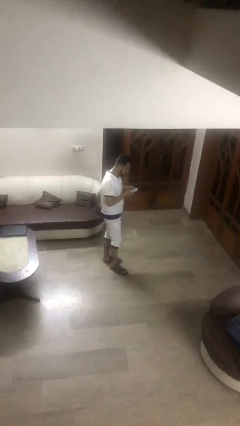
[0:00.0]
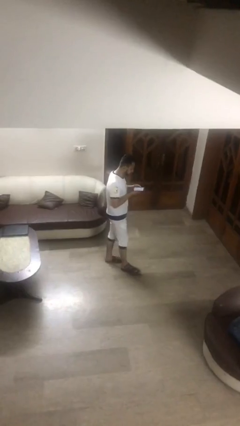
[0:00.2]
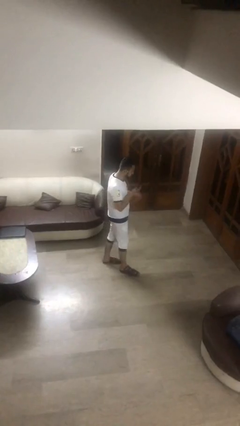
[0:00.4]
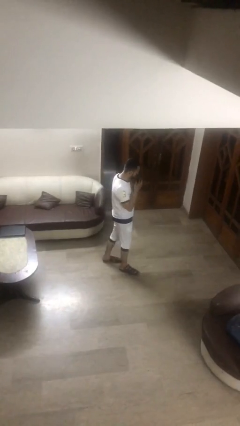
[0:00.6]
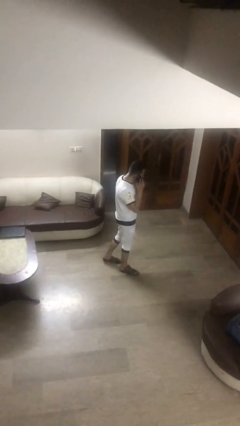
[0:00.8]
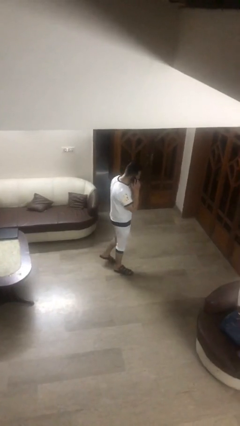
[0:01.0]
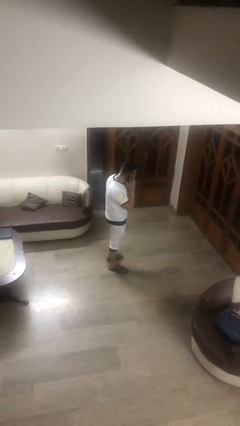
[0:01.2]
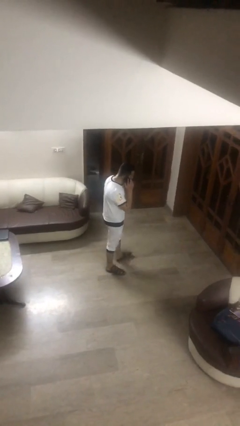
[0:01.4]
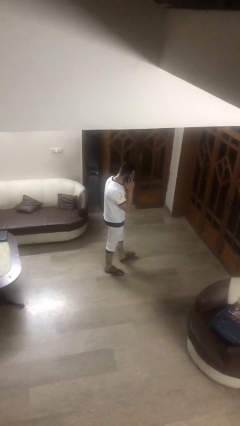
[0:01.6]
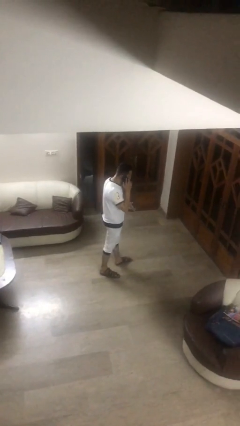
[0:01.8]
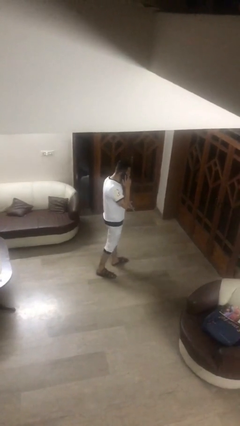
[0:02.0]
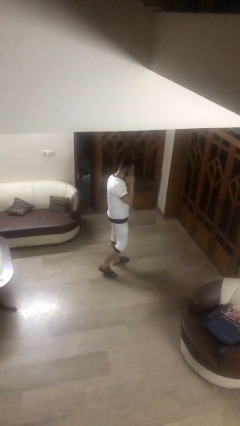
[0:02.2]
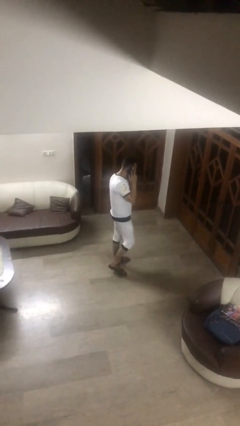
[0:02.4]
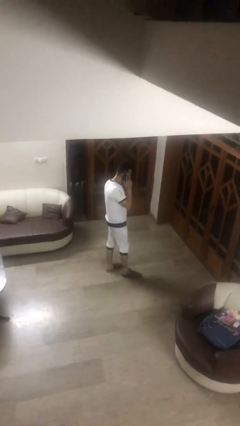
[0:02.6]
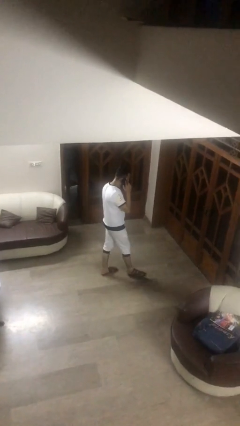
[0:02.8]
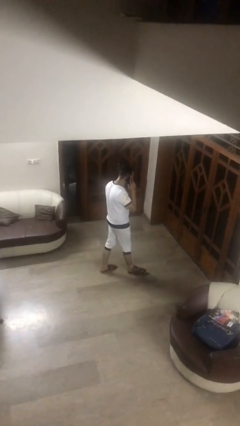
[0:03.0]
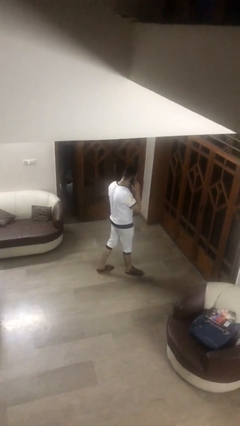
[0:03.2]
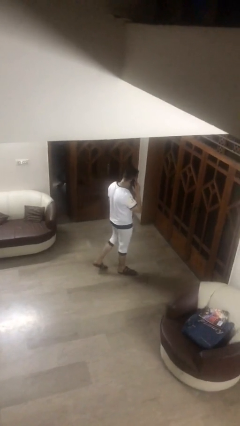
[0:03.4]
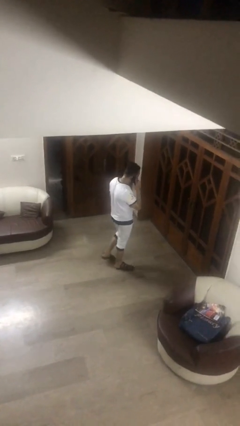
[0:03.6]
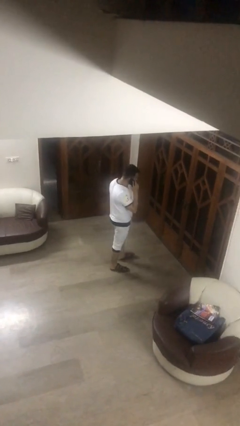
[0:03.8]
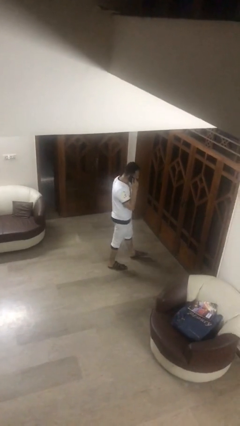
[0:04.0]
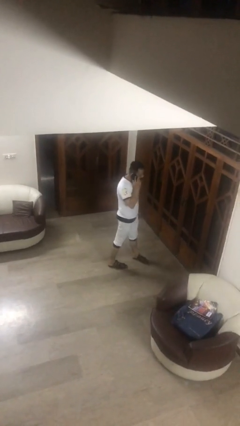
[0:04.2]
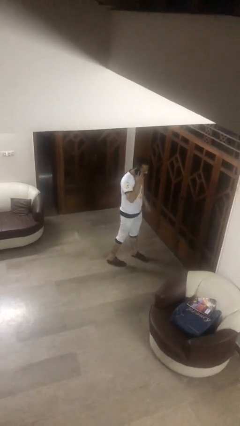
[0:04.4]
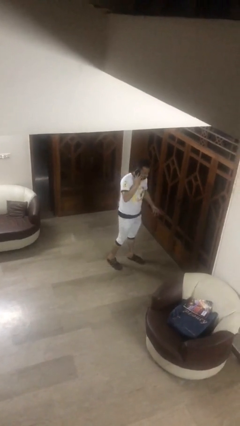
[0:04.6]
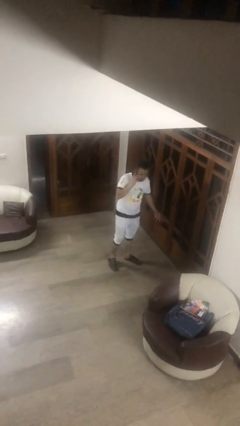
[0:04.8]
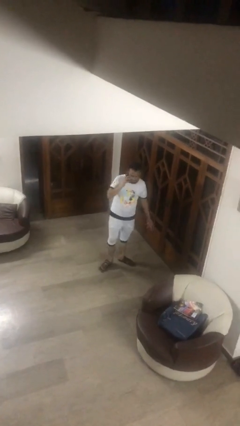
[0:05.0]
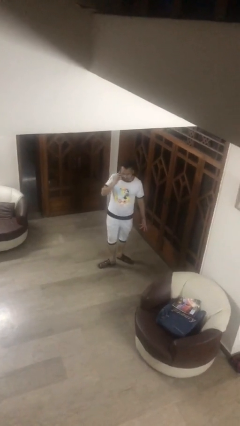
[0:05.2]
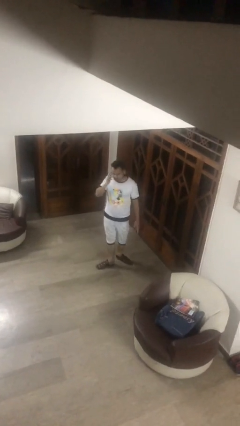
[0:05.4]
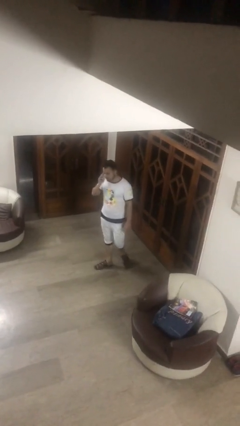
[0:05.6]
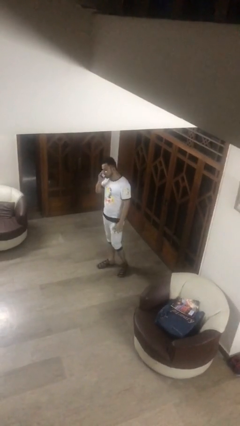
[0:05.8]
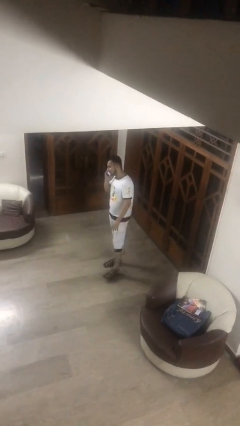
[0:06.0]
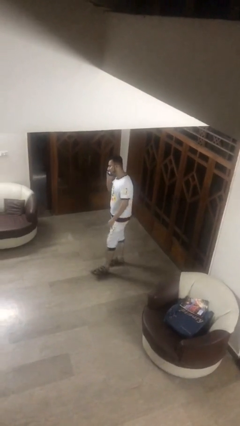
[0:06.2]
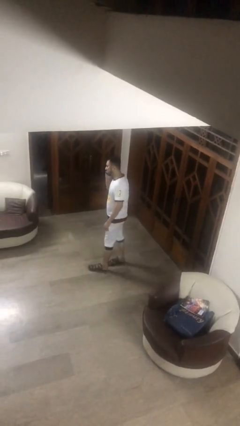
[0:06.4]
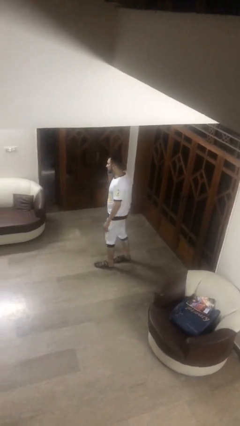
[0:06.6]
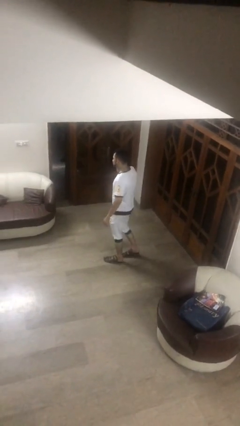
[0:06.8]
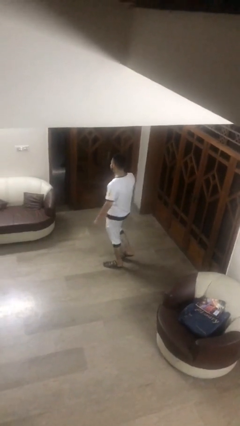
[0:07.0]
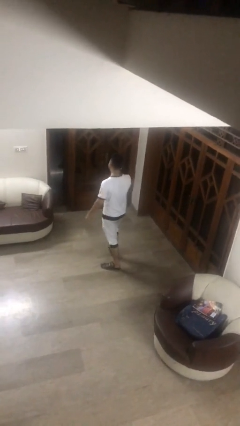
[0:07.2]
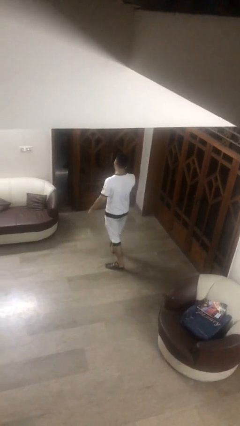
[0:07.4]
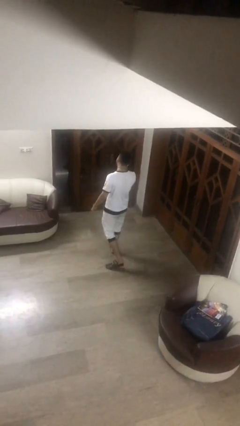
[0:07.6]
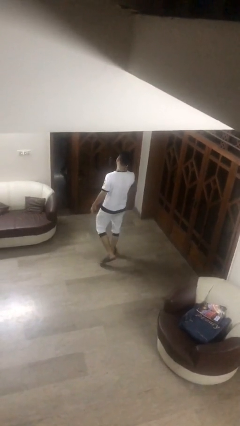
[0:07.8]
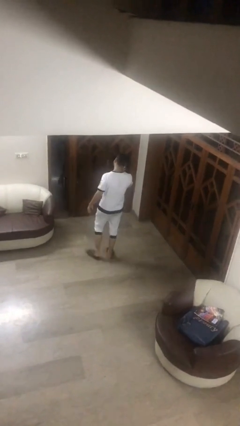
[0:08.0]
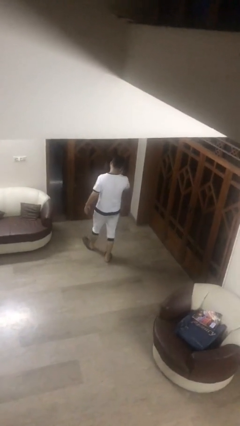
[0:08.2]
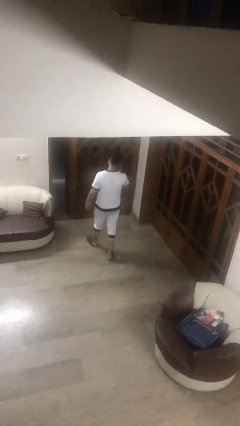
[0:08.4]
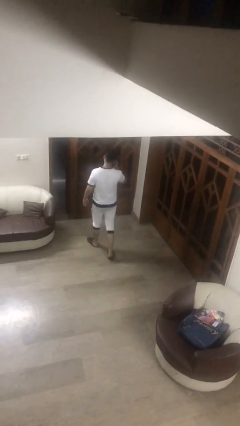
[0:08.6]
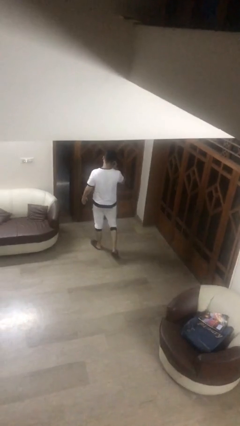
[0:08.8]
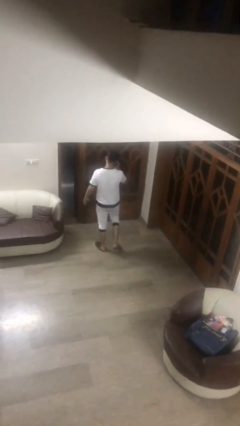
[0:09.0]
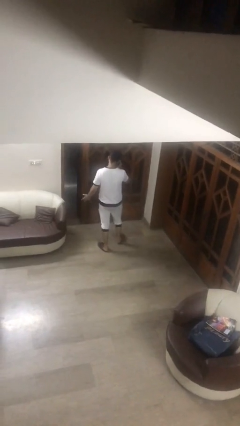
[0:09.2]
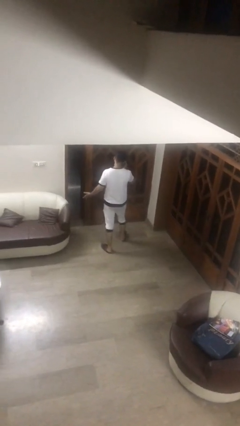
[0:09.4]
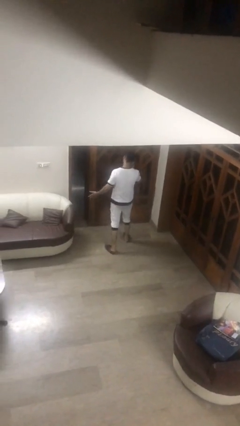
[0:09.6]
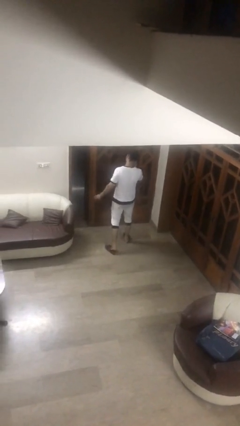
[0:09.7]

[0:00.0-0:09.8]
person talks on phone

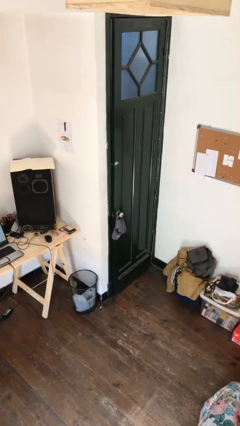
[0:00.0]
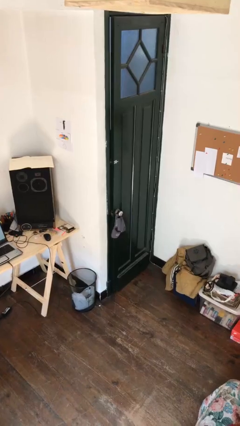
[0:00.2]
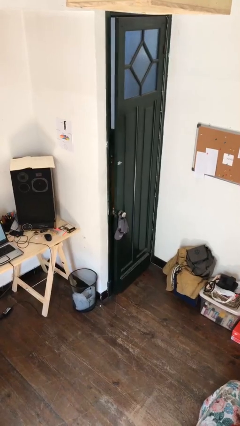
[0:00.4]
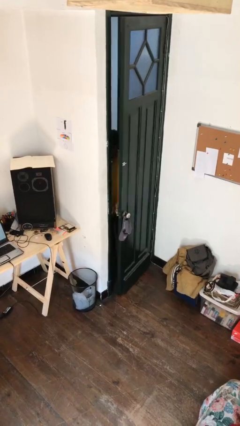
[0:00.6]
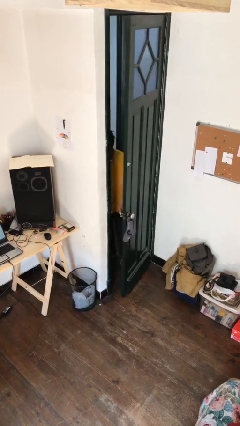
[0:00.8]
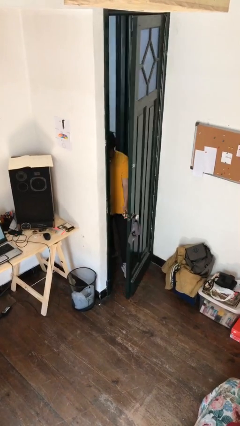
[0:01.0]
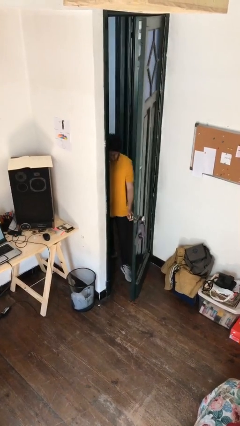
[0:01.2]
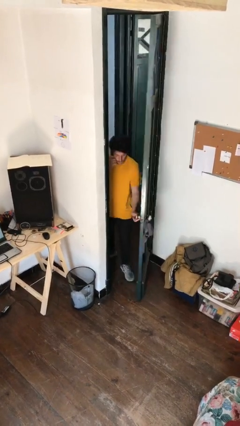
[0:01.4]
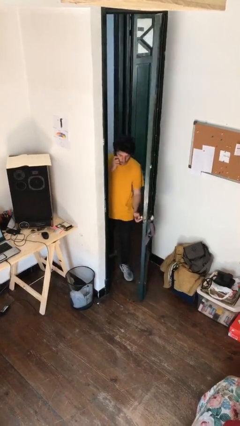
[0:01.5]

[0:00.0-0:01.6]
person opens facility door

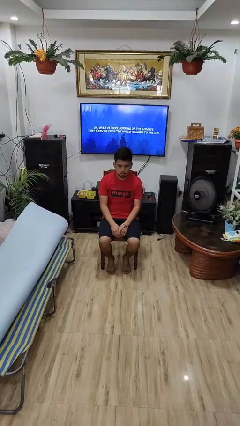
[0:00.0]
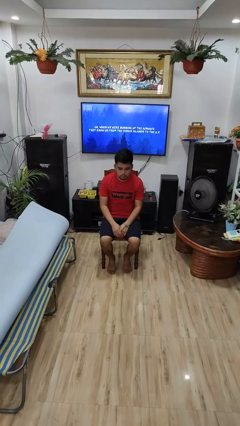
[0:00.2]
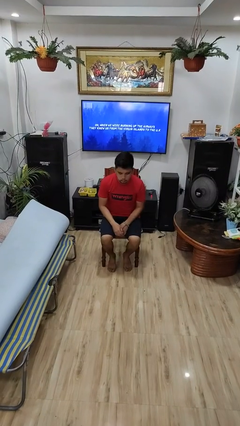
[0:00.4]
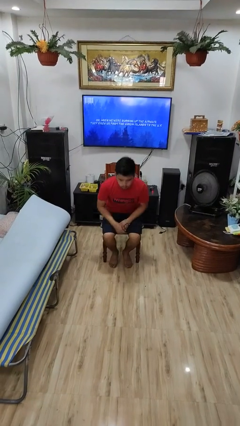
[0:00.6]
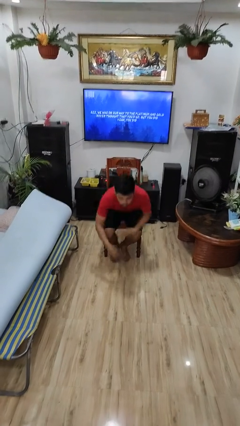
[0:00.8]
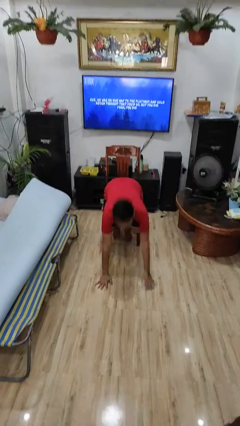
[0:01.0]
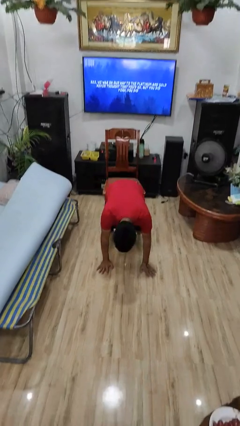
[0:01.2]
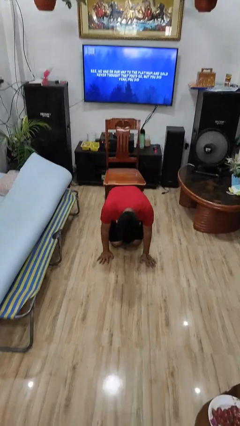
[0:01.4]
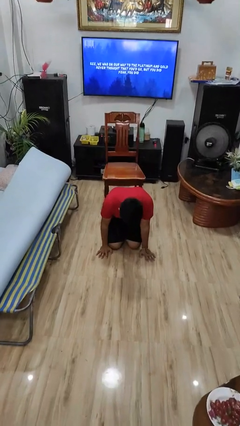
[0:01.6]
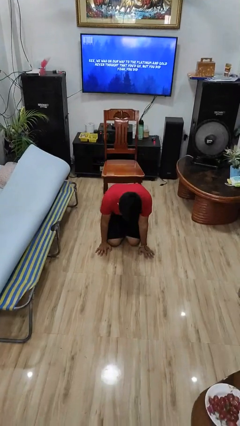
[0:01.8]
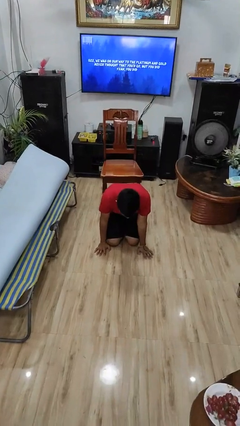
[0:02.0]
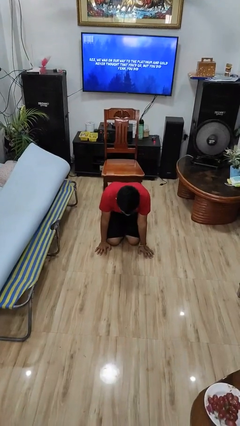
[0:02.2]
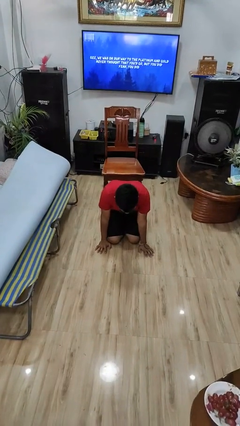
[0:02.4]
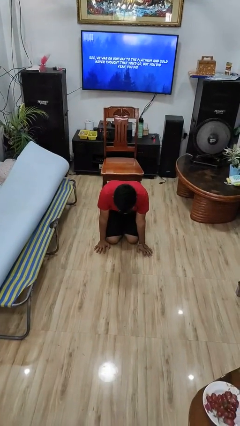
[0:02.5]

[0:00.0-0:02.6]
person falls from chair

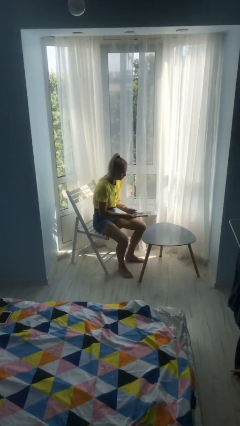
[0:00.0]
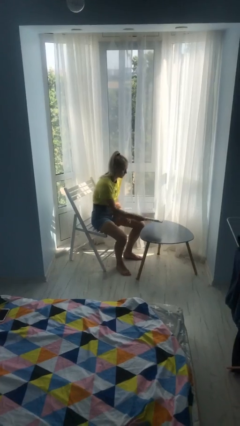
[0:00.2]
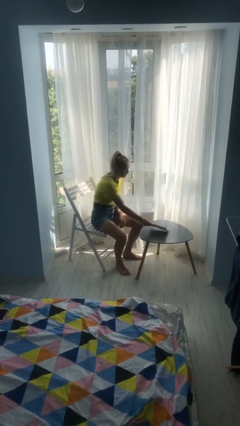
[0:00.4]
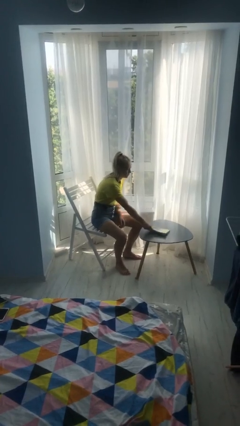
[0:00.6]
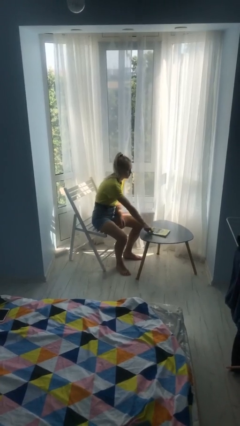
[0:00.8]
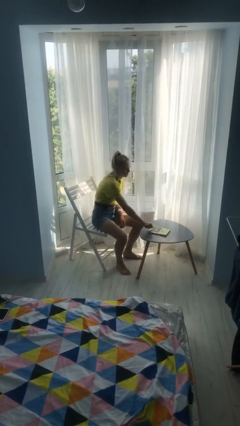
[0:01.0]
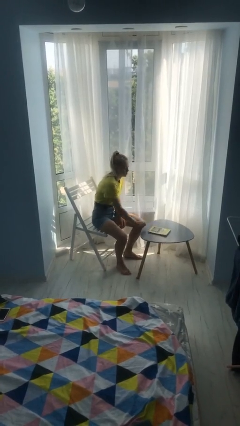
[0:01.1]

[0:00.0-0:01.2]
person puts down object on table

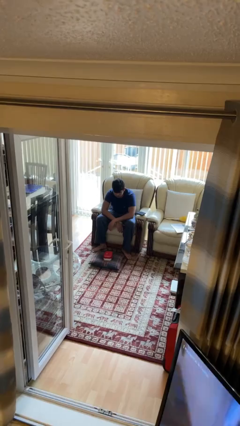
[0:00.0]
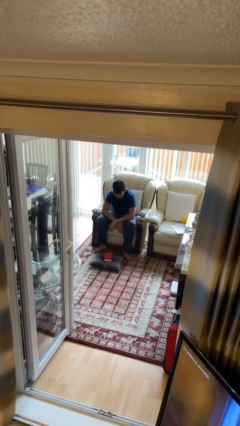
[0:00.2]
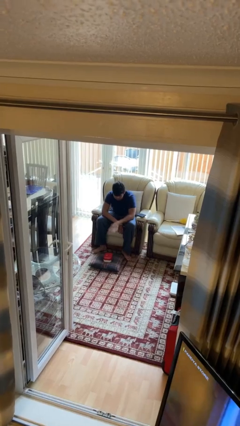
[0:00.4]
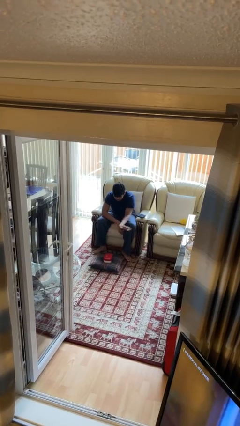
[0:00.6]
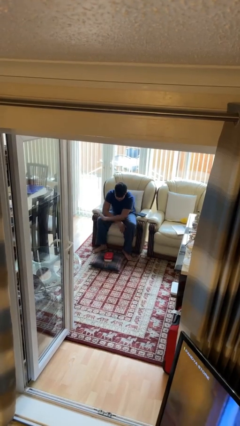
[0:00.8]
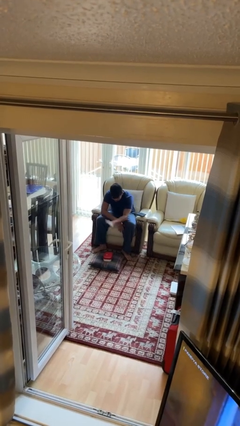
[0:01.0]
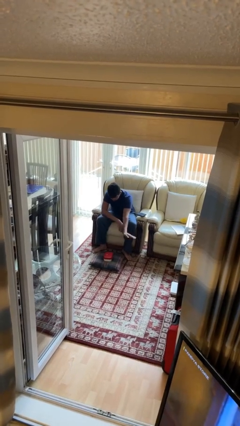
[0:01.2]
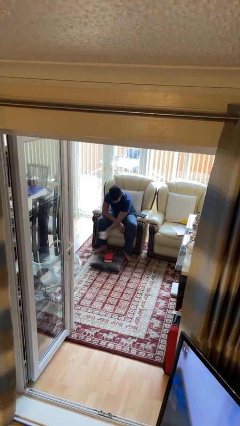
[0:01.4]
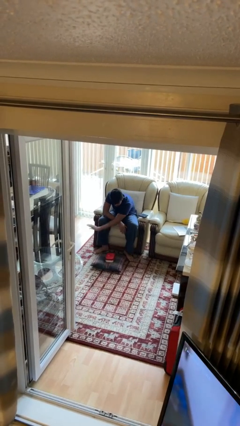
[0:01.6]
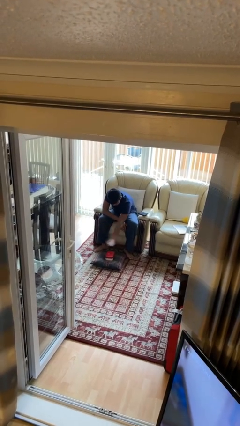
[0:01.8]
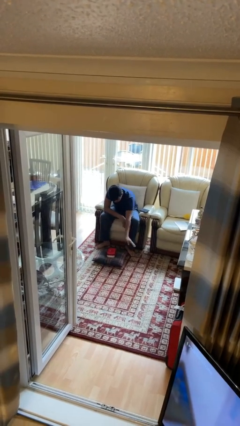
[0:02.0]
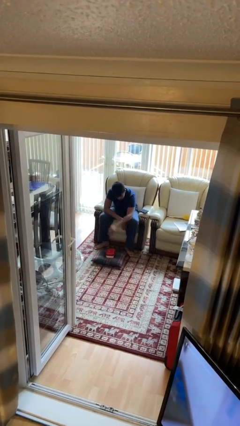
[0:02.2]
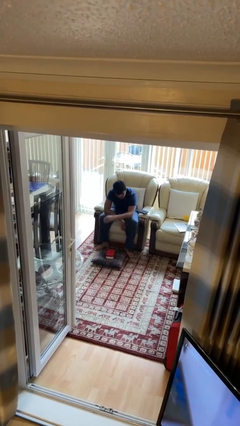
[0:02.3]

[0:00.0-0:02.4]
person waves hand over object

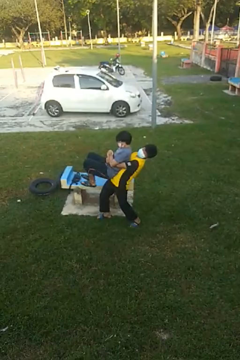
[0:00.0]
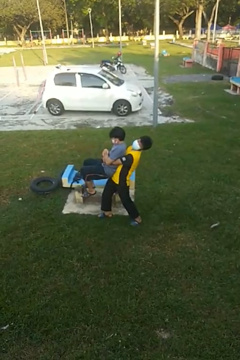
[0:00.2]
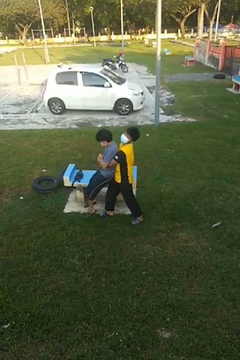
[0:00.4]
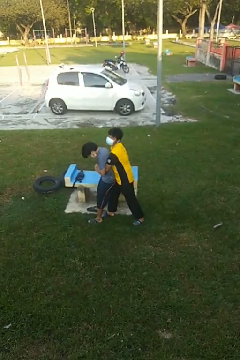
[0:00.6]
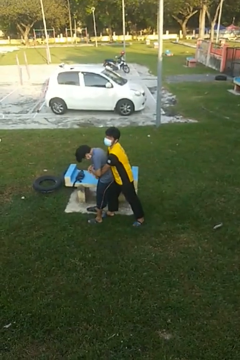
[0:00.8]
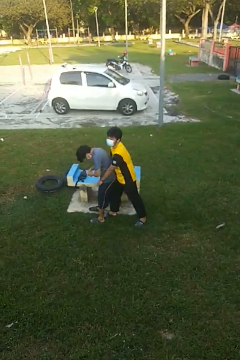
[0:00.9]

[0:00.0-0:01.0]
person puts down person
